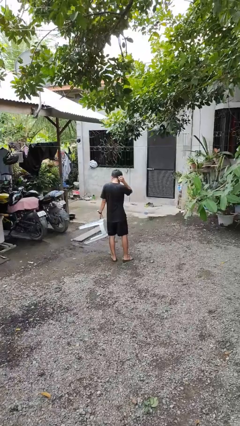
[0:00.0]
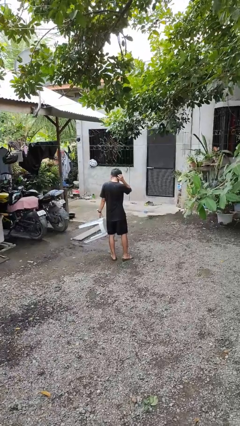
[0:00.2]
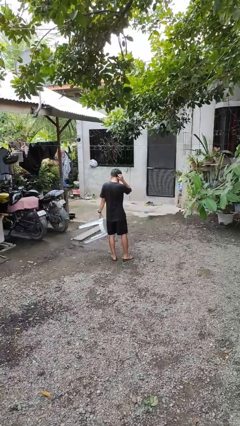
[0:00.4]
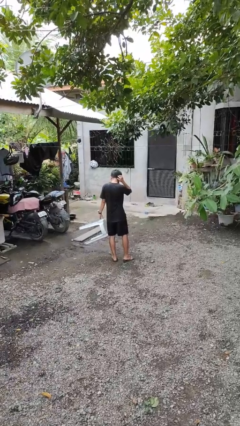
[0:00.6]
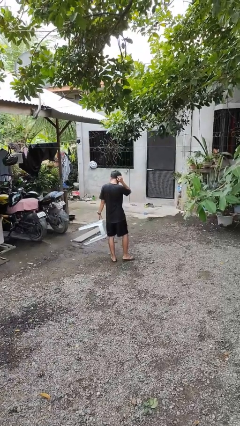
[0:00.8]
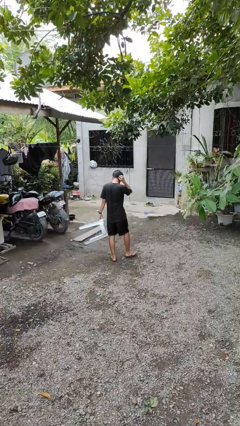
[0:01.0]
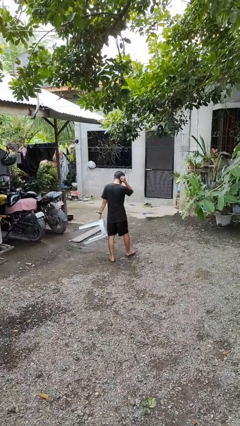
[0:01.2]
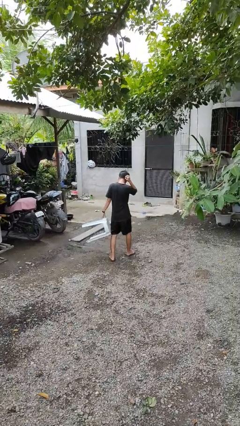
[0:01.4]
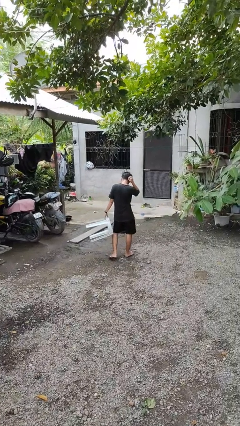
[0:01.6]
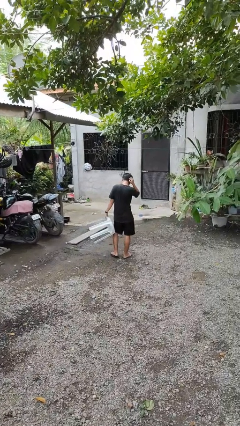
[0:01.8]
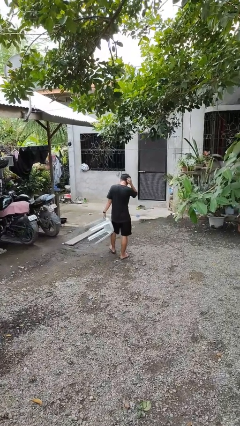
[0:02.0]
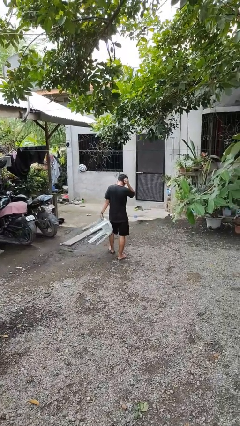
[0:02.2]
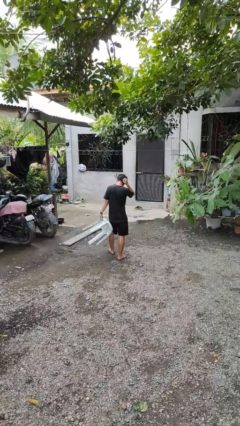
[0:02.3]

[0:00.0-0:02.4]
person carries furniture

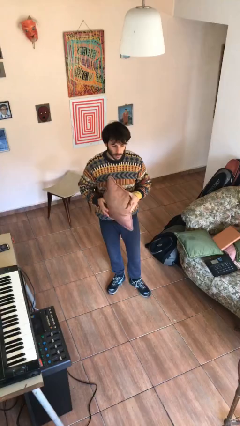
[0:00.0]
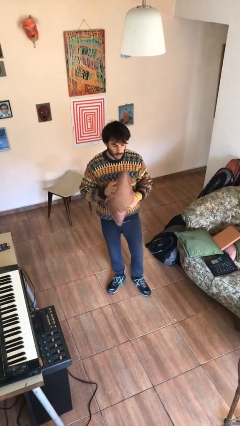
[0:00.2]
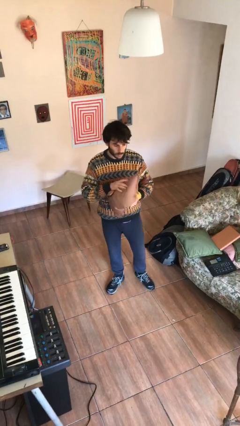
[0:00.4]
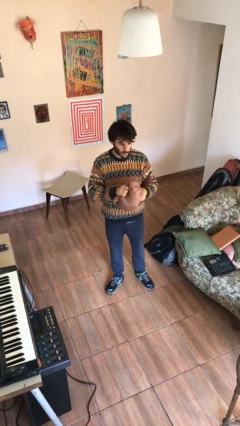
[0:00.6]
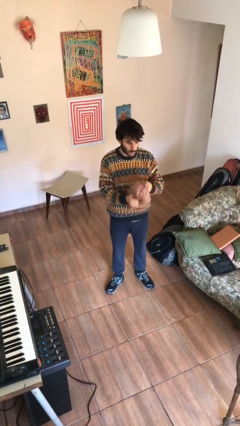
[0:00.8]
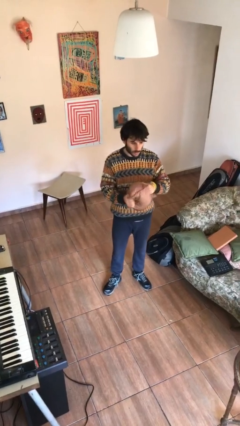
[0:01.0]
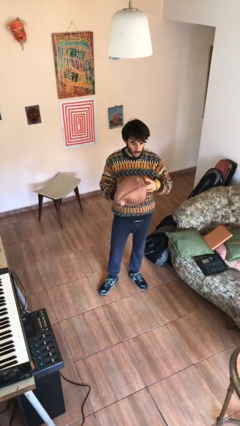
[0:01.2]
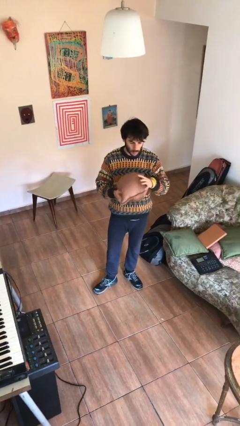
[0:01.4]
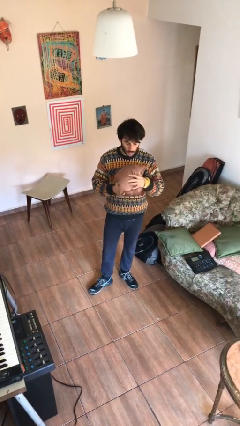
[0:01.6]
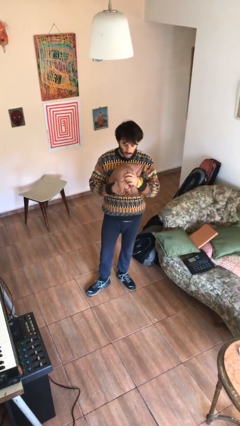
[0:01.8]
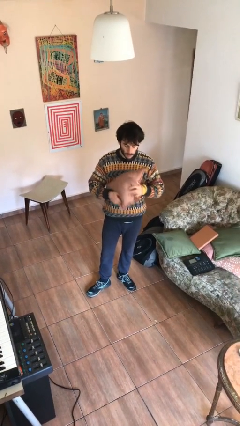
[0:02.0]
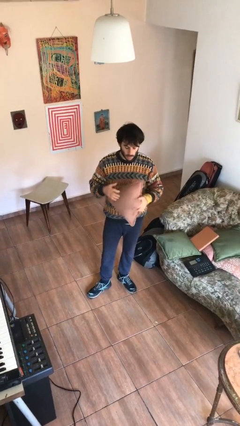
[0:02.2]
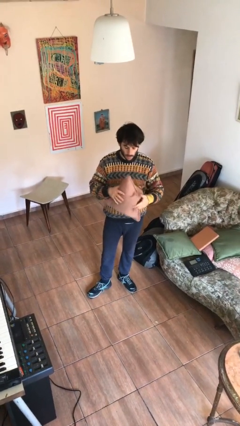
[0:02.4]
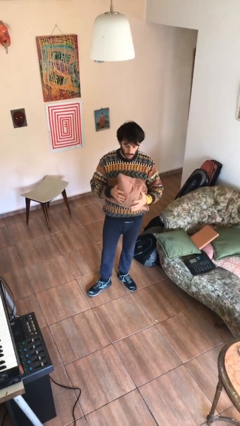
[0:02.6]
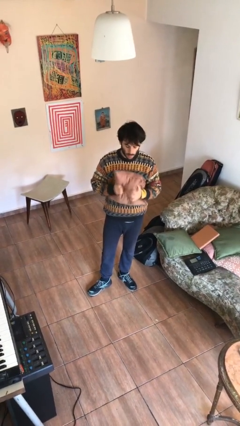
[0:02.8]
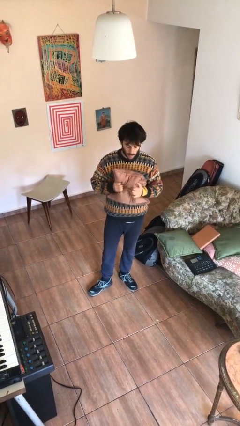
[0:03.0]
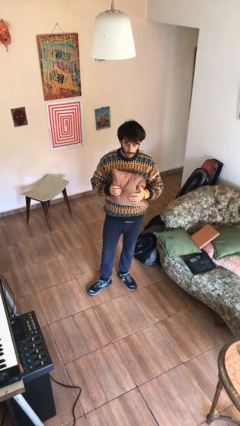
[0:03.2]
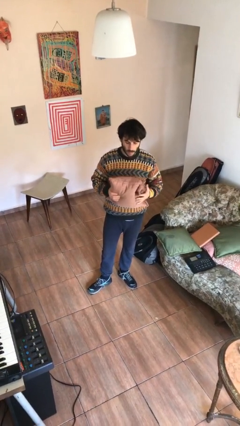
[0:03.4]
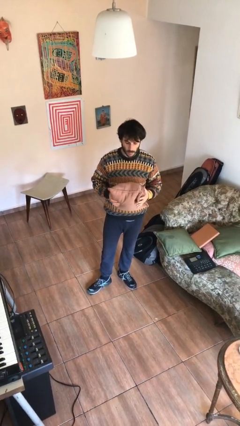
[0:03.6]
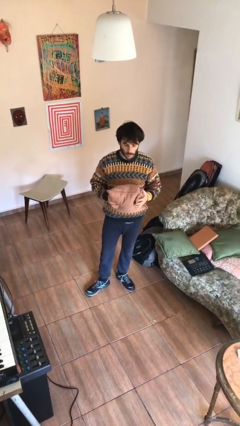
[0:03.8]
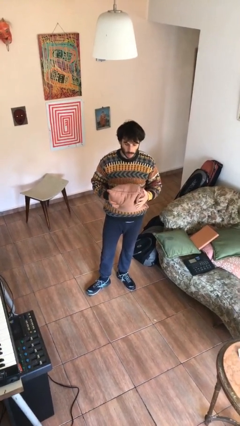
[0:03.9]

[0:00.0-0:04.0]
person squeezes object

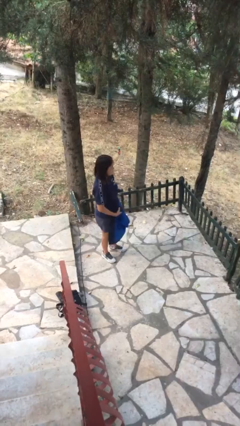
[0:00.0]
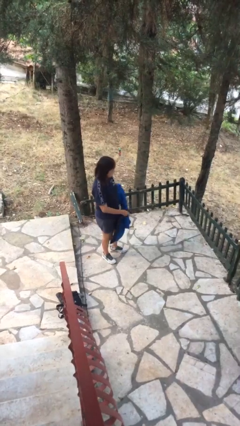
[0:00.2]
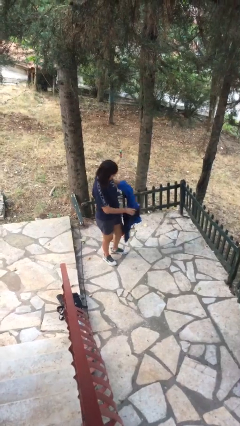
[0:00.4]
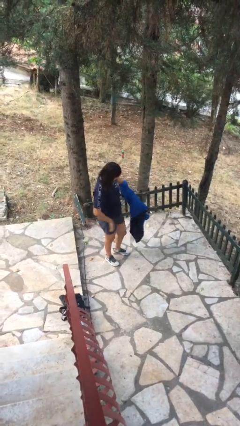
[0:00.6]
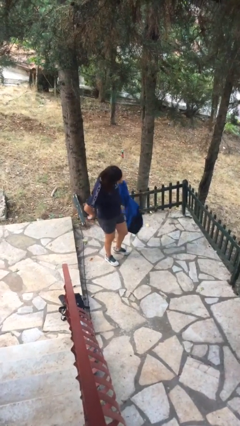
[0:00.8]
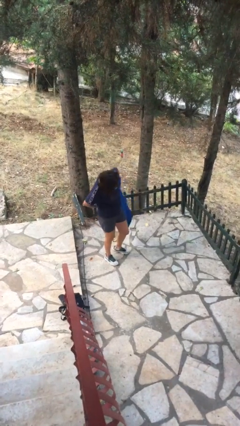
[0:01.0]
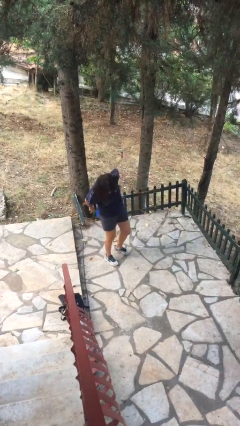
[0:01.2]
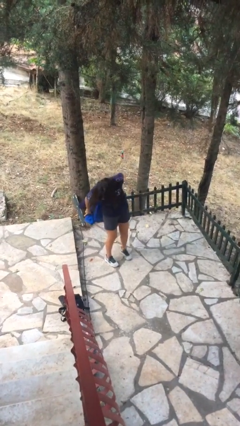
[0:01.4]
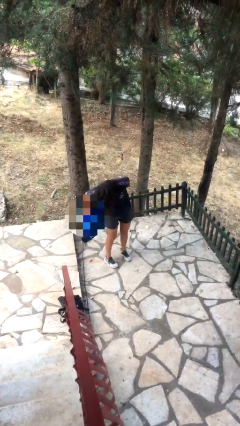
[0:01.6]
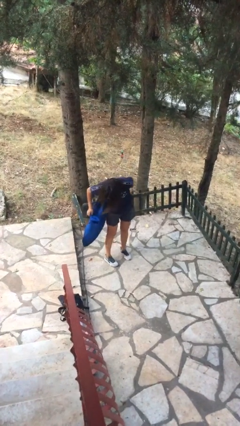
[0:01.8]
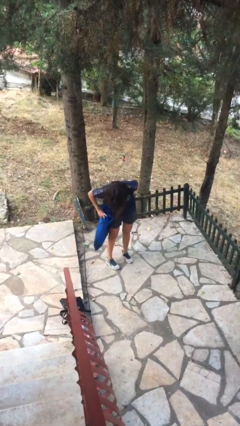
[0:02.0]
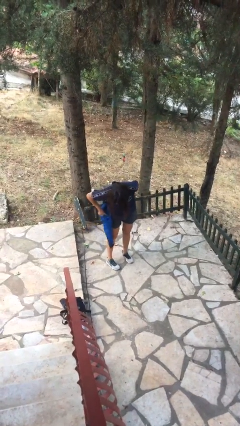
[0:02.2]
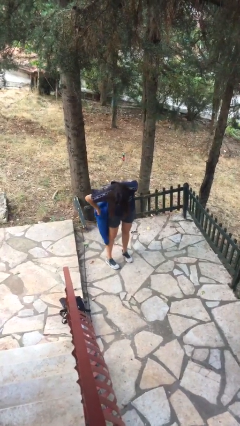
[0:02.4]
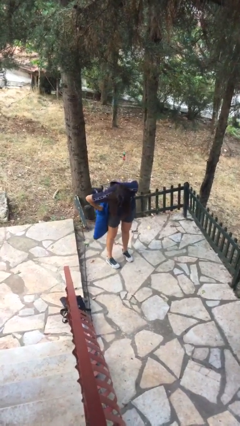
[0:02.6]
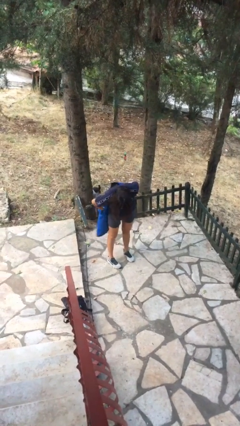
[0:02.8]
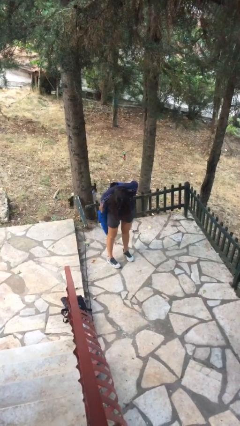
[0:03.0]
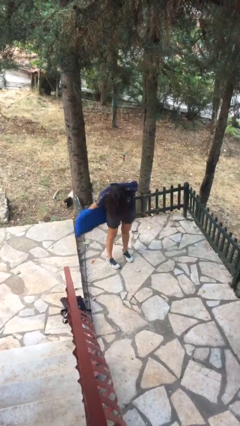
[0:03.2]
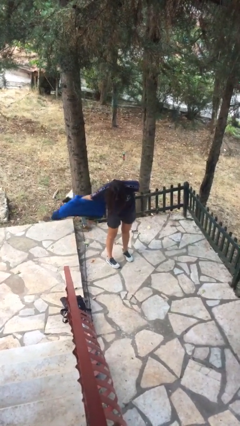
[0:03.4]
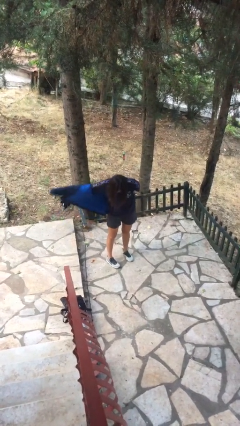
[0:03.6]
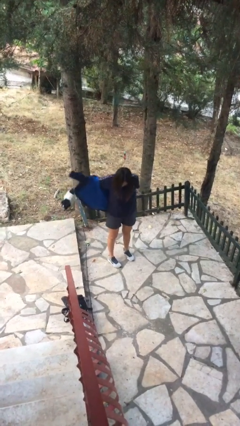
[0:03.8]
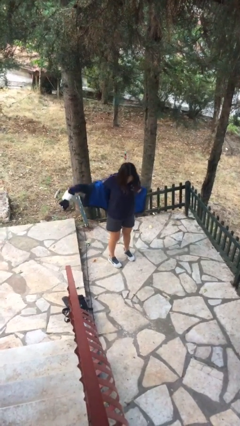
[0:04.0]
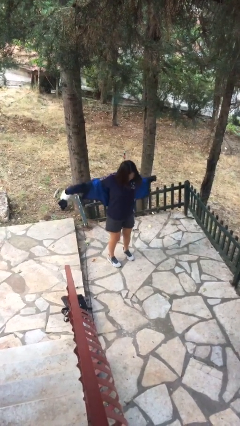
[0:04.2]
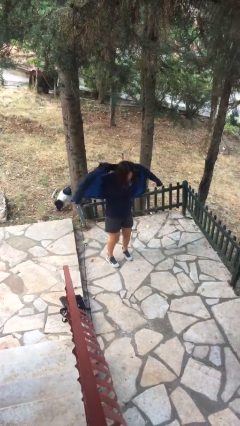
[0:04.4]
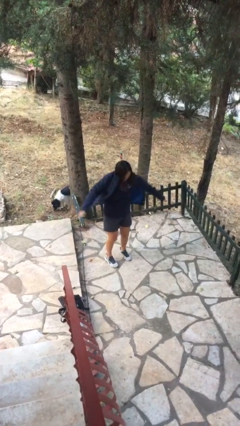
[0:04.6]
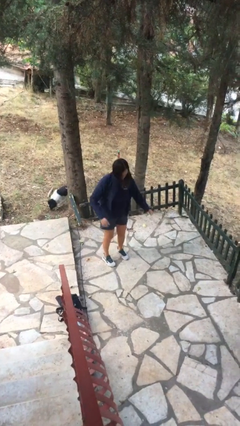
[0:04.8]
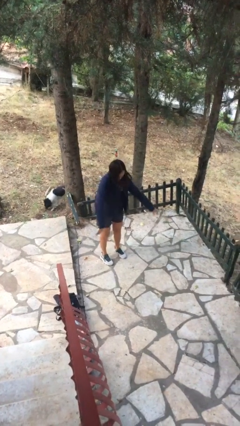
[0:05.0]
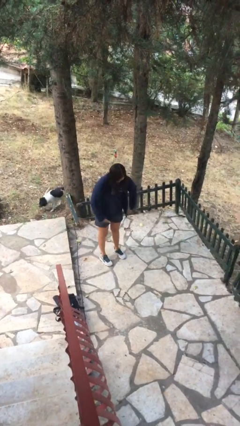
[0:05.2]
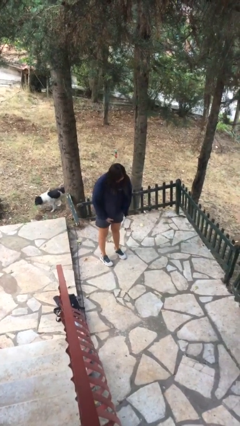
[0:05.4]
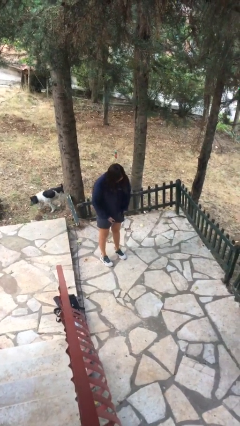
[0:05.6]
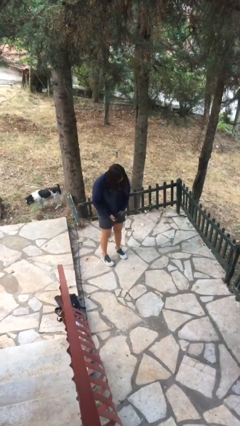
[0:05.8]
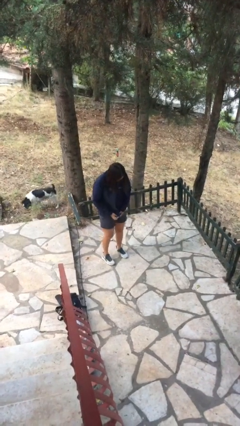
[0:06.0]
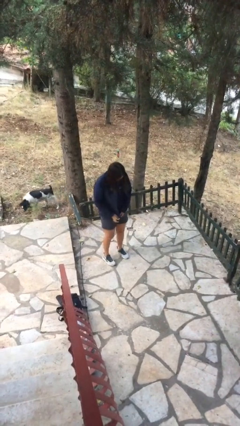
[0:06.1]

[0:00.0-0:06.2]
person puts on jacket

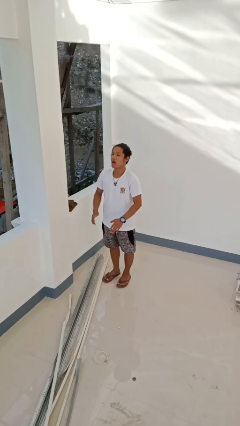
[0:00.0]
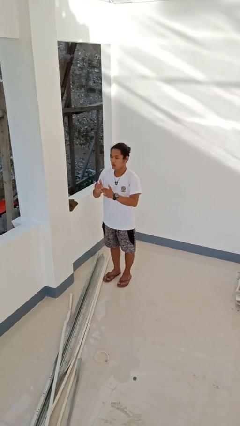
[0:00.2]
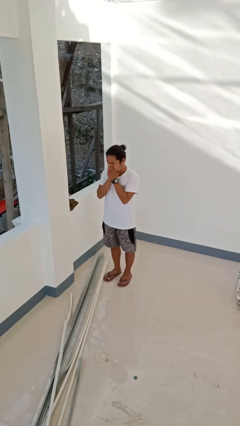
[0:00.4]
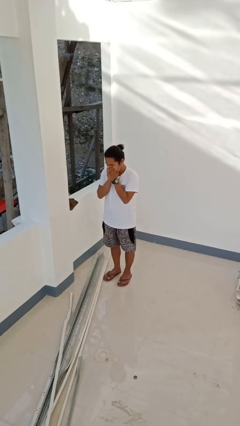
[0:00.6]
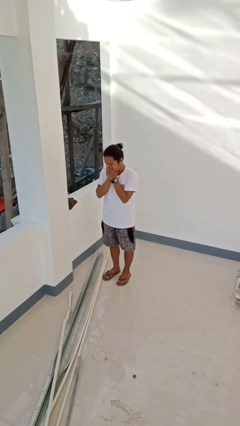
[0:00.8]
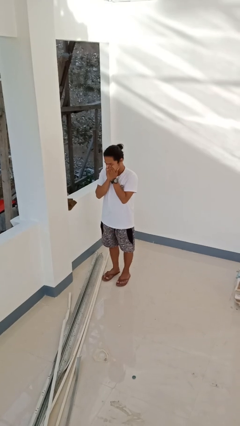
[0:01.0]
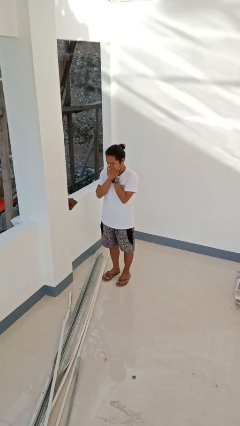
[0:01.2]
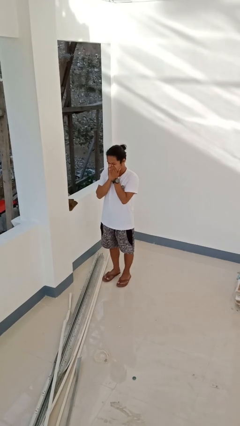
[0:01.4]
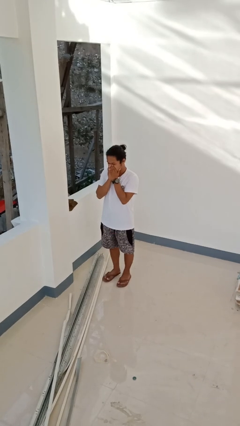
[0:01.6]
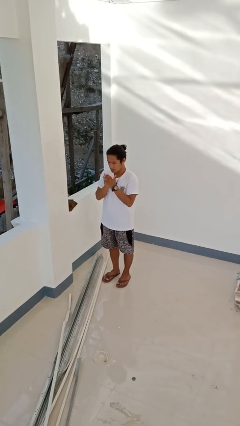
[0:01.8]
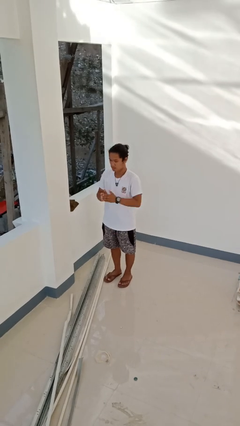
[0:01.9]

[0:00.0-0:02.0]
person sneezes into hand

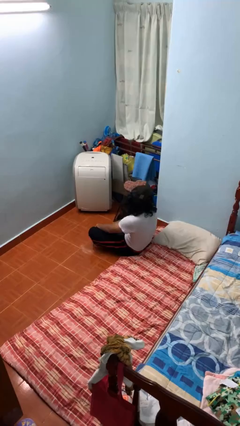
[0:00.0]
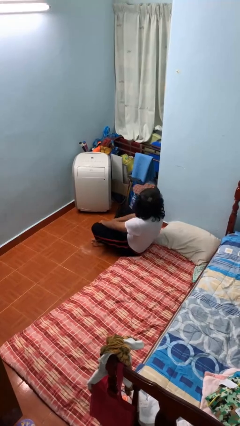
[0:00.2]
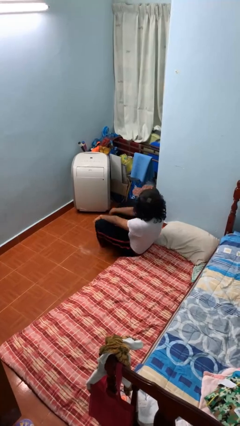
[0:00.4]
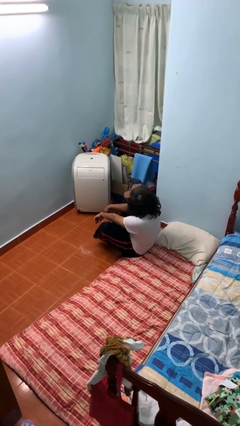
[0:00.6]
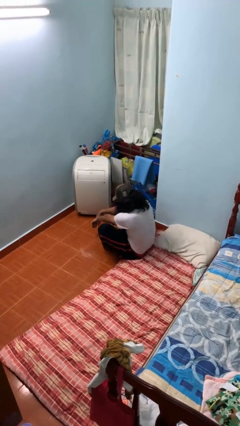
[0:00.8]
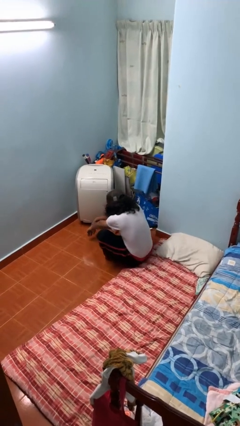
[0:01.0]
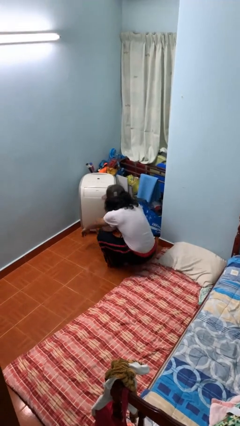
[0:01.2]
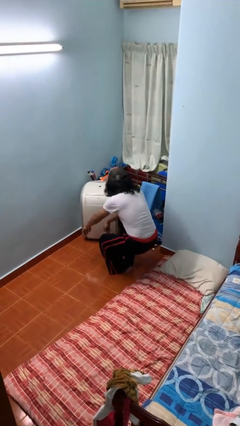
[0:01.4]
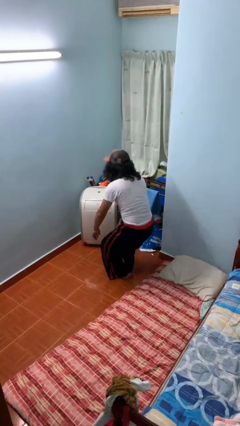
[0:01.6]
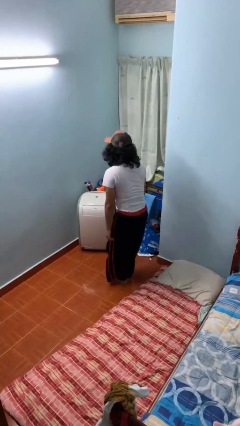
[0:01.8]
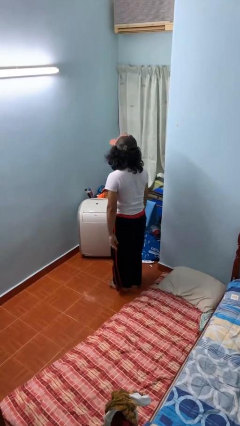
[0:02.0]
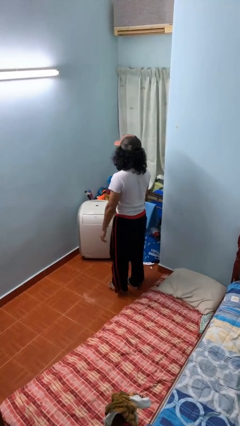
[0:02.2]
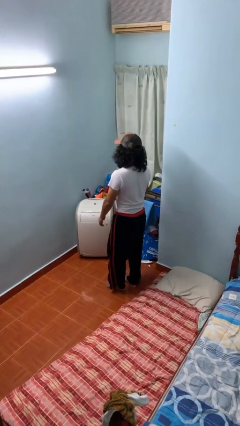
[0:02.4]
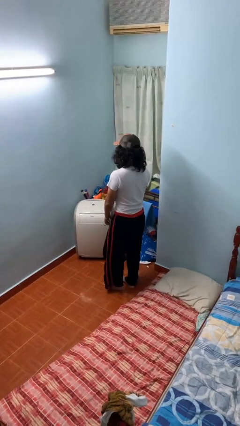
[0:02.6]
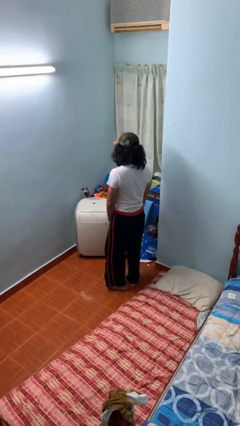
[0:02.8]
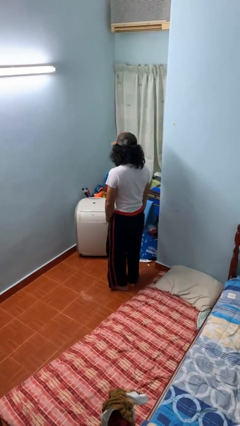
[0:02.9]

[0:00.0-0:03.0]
person stands up from floor
